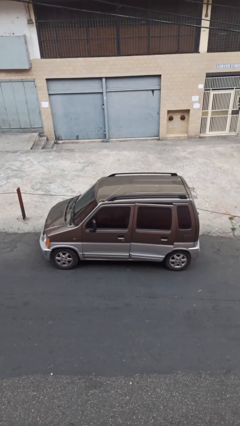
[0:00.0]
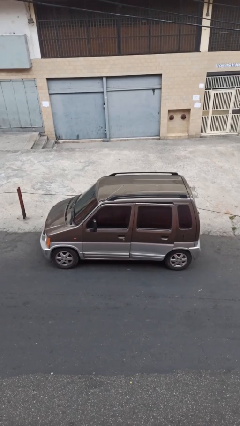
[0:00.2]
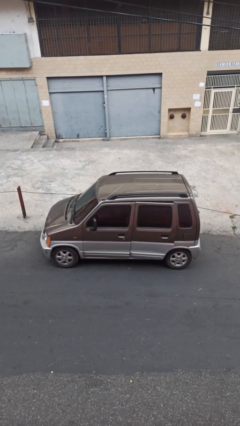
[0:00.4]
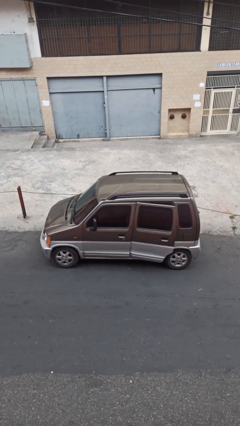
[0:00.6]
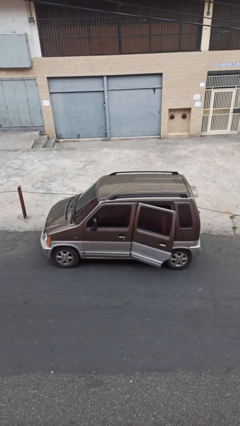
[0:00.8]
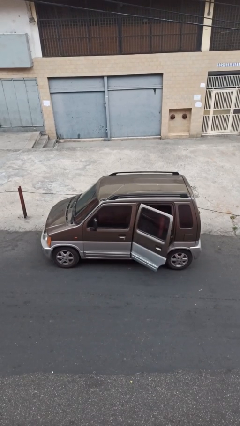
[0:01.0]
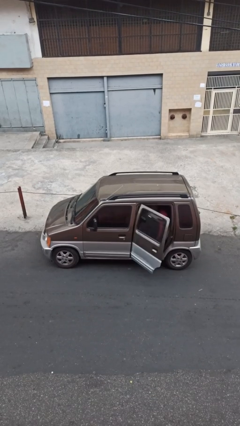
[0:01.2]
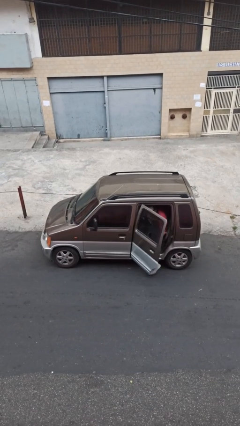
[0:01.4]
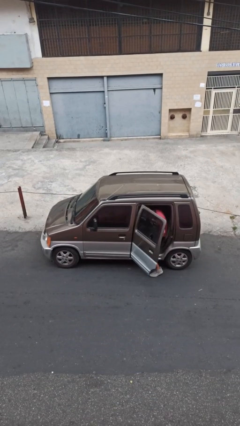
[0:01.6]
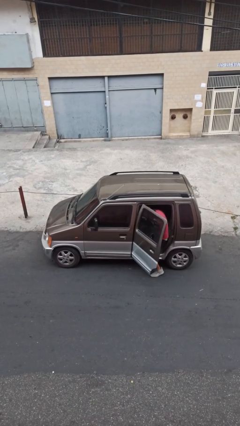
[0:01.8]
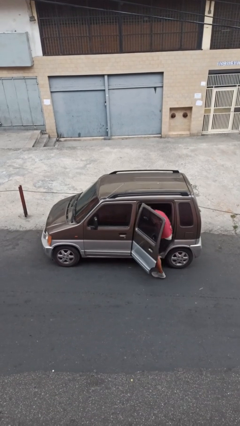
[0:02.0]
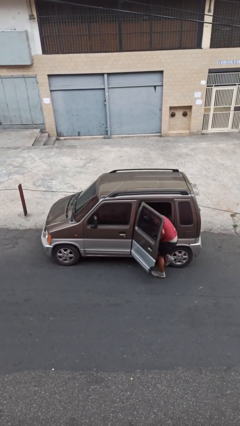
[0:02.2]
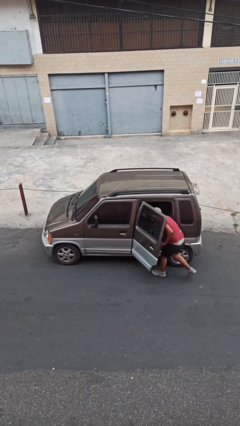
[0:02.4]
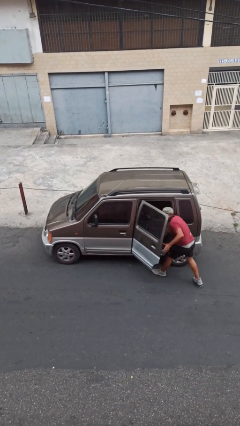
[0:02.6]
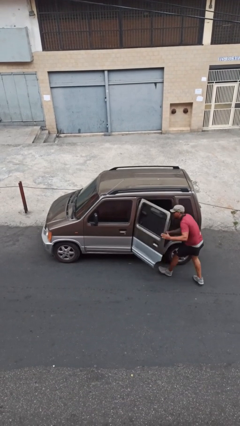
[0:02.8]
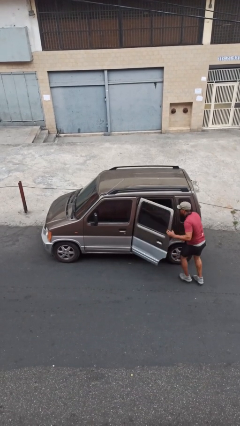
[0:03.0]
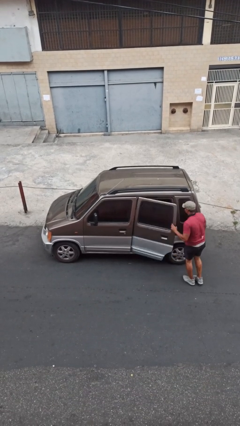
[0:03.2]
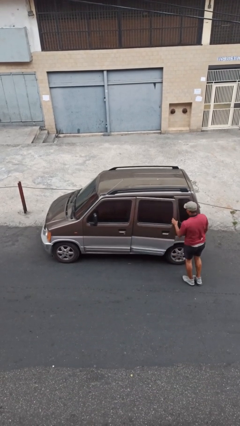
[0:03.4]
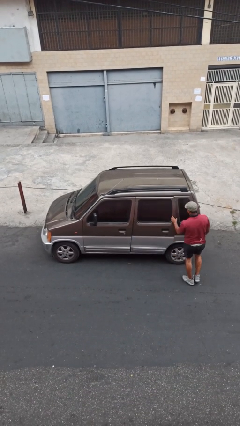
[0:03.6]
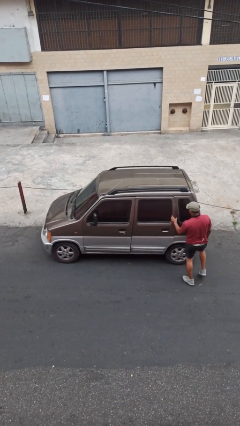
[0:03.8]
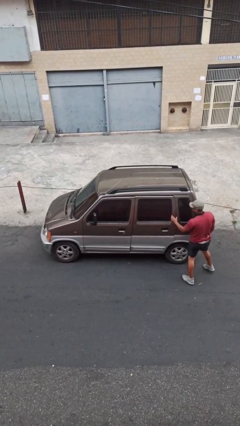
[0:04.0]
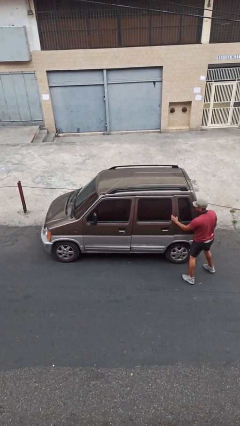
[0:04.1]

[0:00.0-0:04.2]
car drops off person

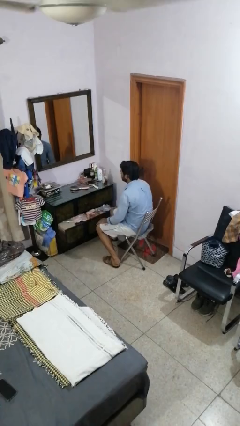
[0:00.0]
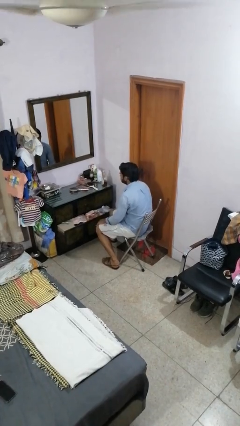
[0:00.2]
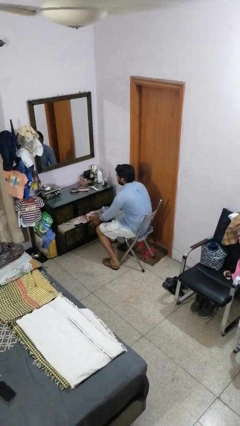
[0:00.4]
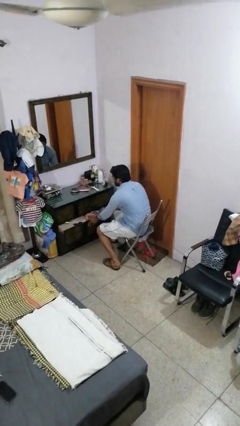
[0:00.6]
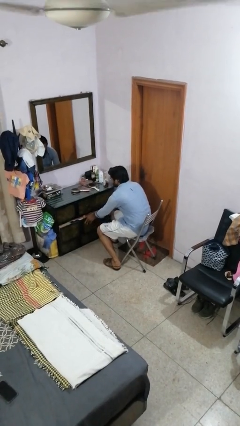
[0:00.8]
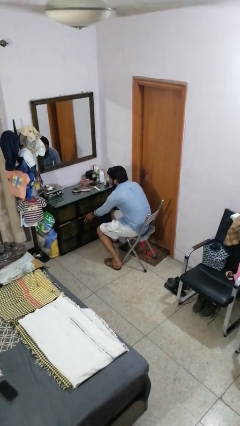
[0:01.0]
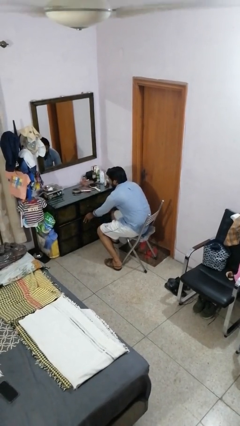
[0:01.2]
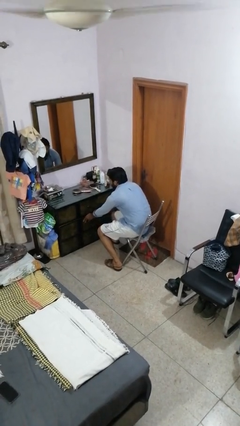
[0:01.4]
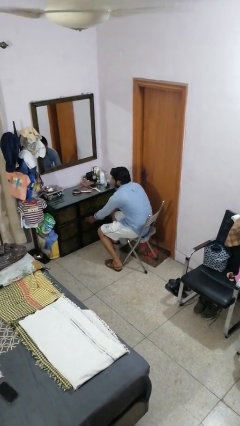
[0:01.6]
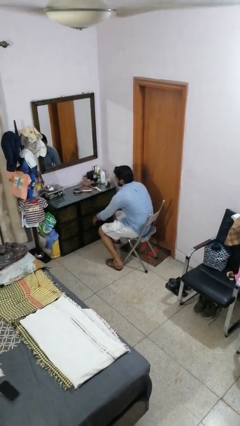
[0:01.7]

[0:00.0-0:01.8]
person closes dresser drawer

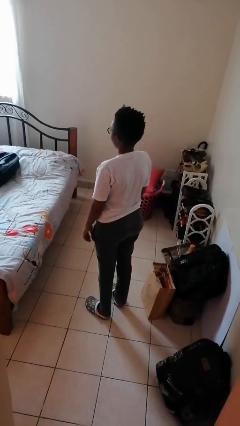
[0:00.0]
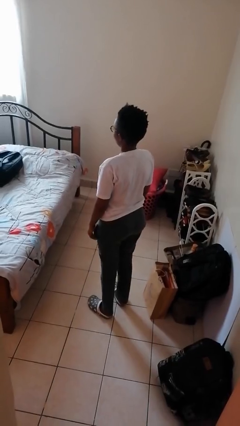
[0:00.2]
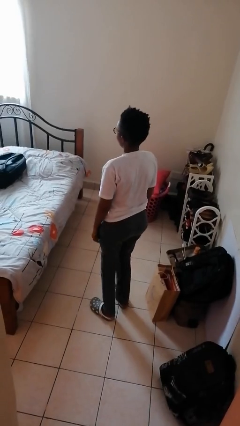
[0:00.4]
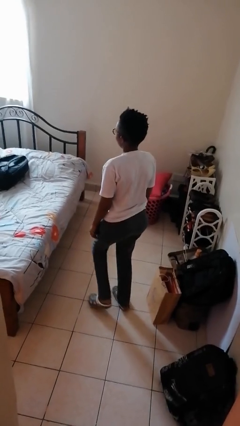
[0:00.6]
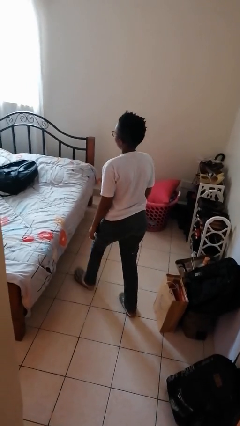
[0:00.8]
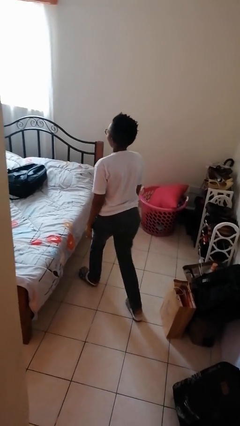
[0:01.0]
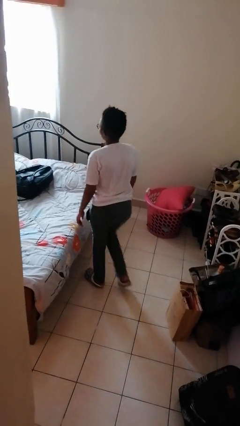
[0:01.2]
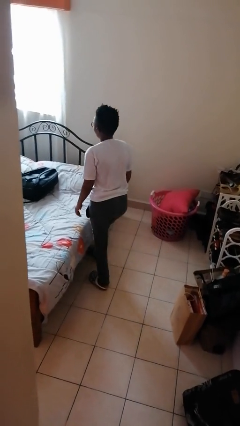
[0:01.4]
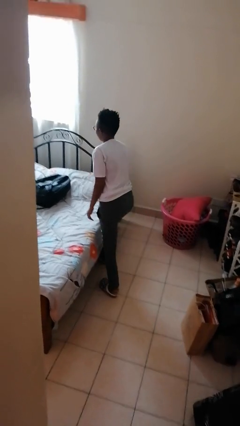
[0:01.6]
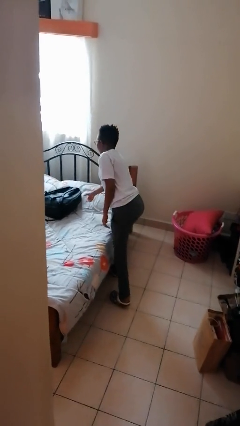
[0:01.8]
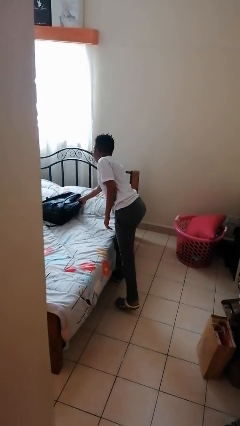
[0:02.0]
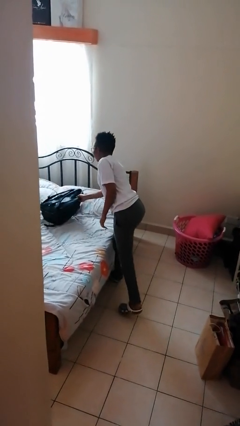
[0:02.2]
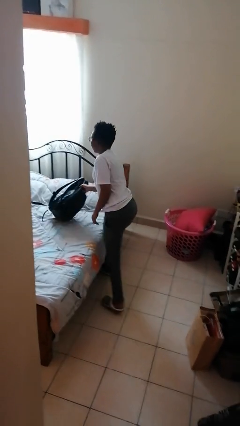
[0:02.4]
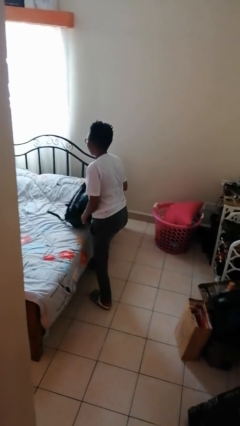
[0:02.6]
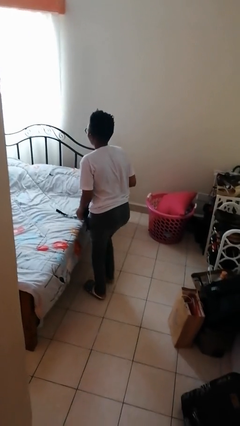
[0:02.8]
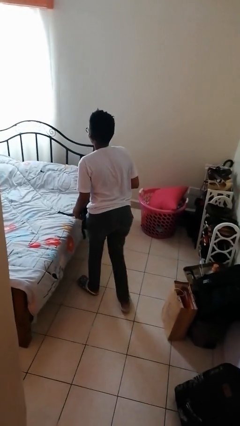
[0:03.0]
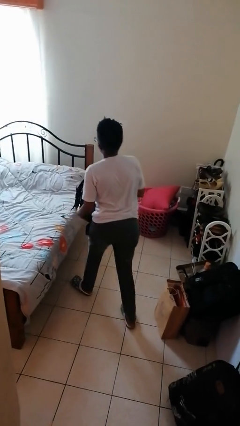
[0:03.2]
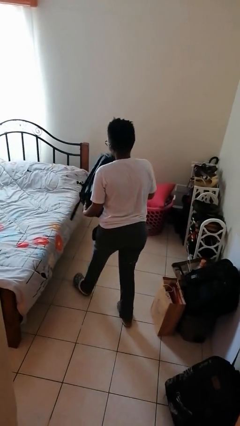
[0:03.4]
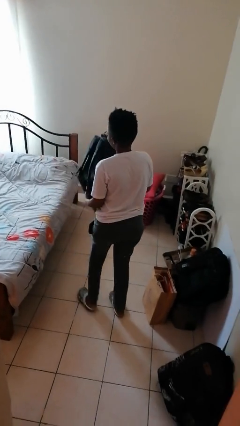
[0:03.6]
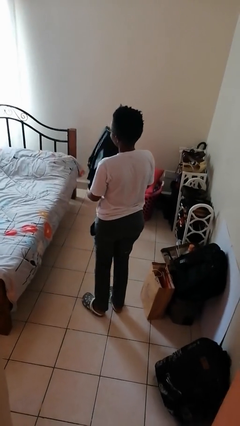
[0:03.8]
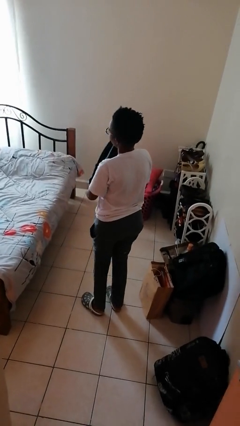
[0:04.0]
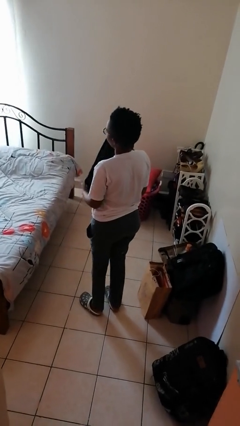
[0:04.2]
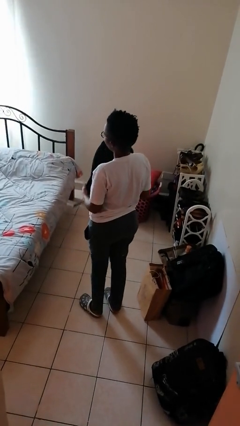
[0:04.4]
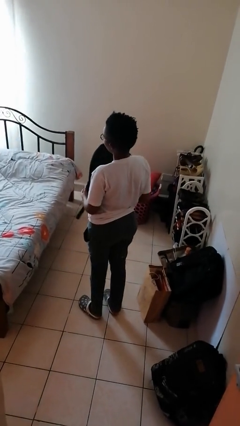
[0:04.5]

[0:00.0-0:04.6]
person picks up object from bed

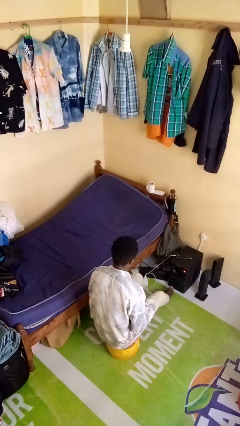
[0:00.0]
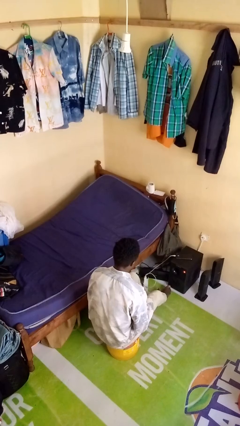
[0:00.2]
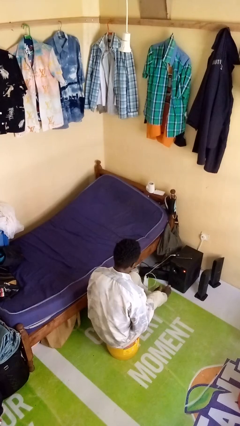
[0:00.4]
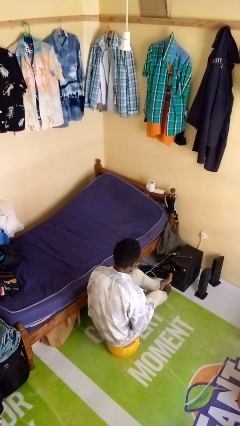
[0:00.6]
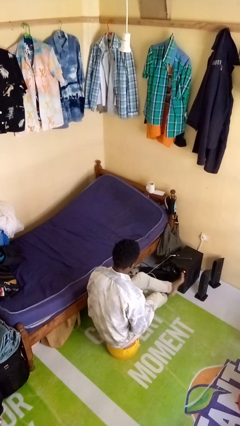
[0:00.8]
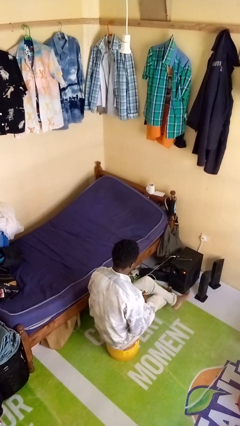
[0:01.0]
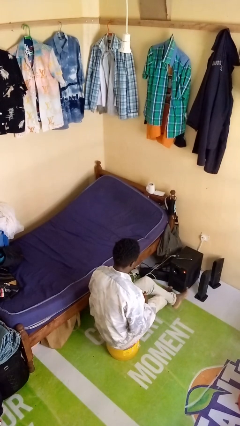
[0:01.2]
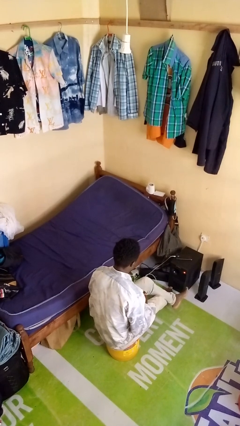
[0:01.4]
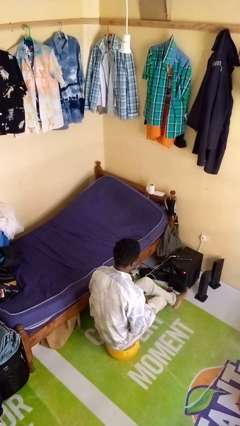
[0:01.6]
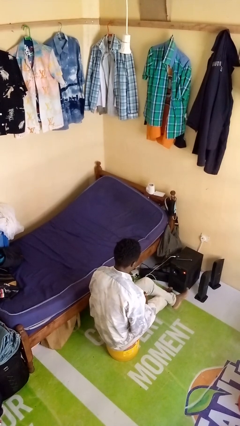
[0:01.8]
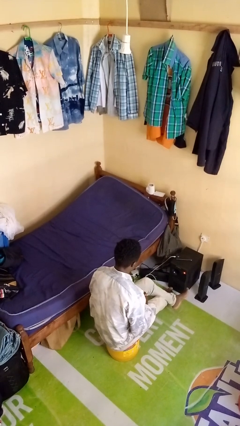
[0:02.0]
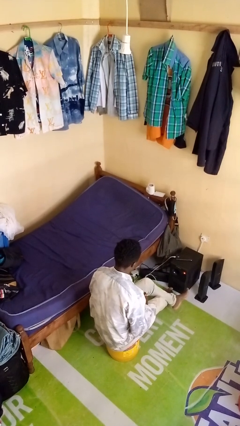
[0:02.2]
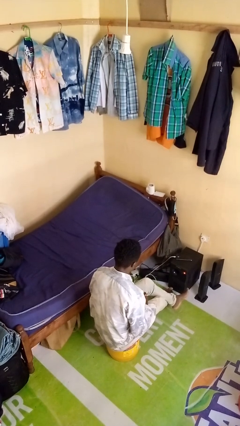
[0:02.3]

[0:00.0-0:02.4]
person crosses legs

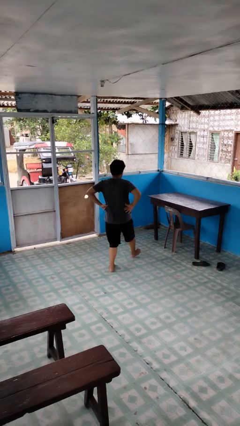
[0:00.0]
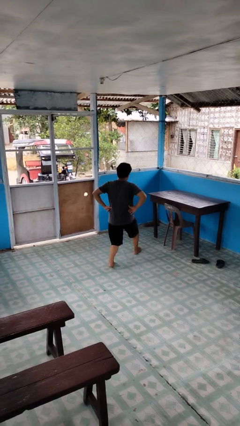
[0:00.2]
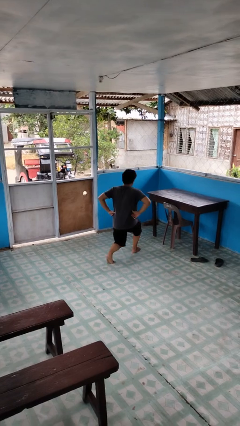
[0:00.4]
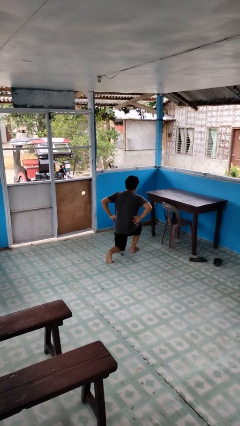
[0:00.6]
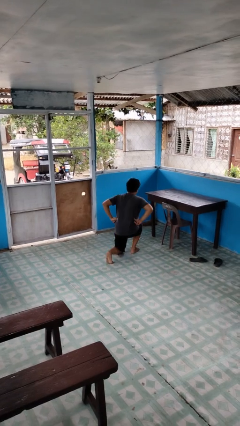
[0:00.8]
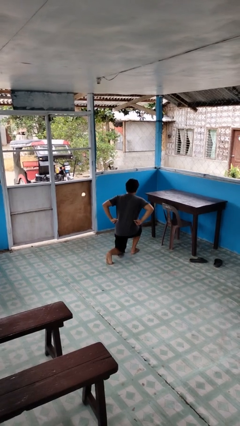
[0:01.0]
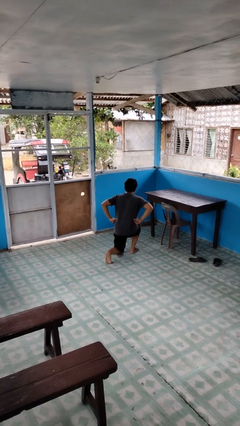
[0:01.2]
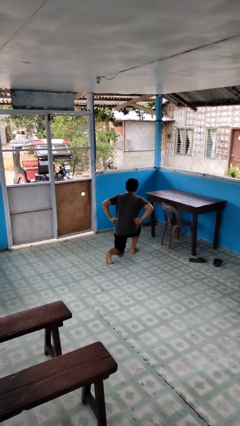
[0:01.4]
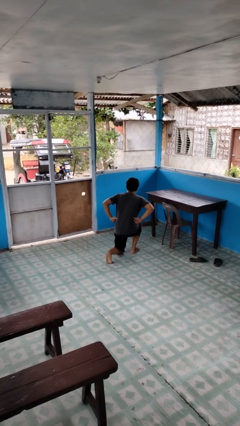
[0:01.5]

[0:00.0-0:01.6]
person exercises with lunges

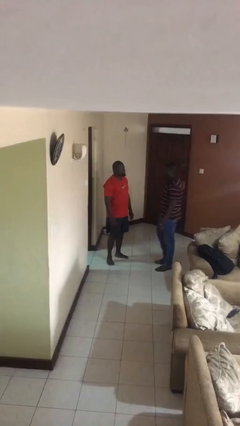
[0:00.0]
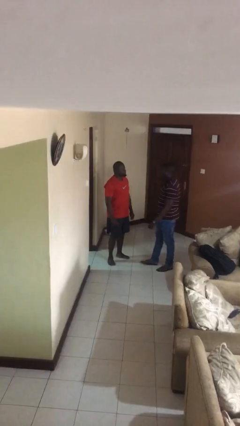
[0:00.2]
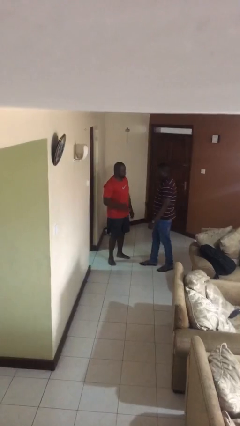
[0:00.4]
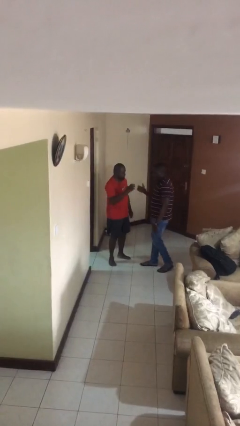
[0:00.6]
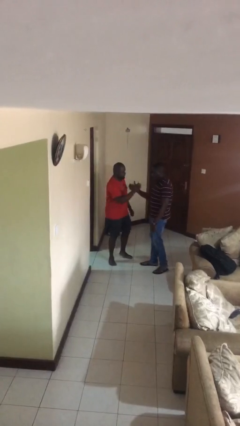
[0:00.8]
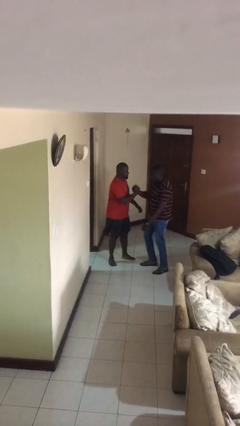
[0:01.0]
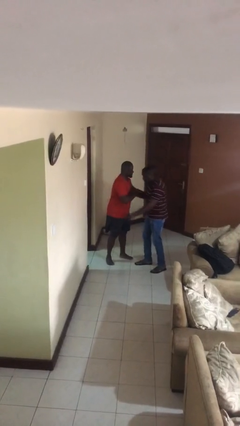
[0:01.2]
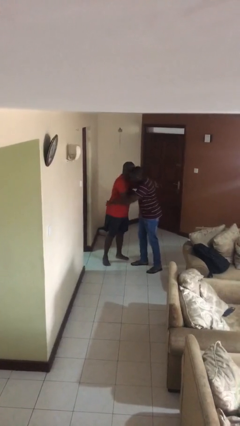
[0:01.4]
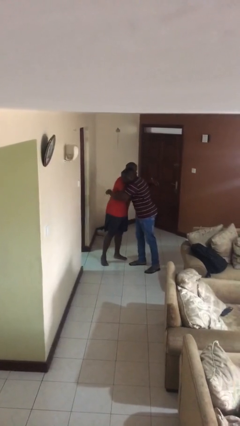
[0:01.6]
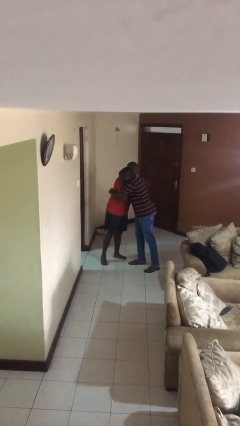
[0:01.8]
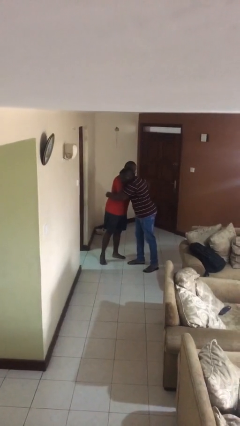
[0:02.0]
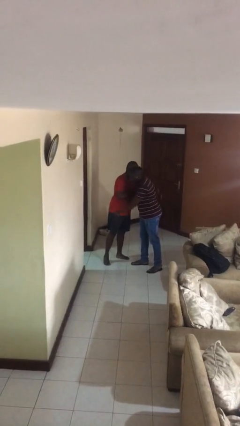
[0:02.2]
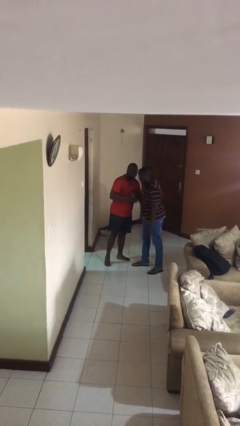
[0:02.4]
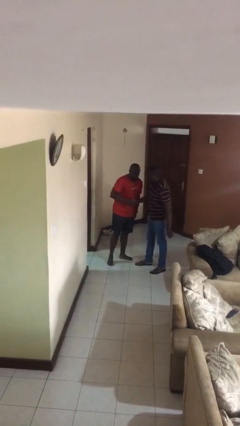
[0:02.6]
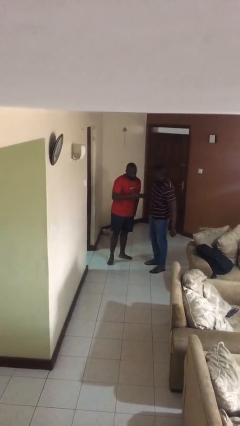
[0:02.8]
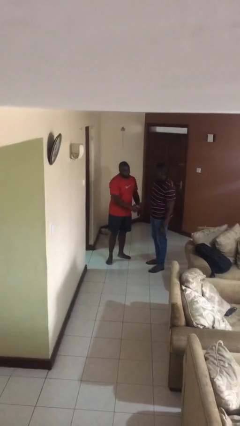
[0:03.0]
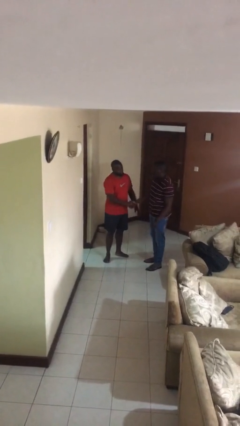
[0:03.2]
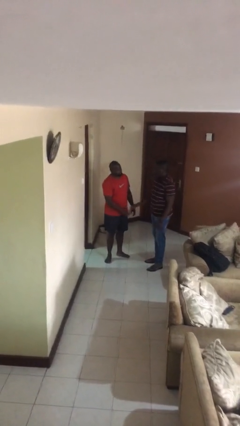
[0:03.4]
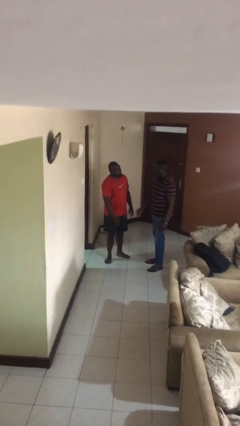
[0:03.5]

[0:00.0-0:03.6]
person embraces person
